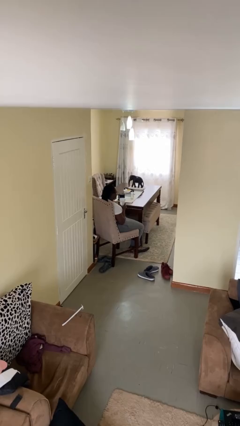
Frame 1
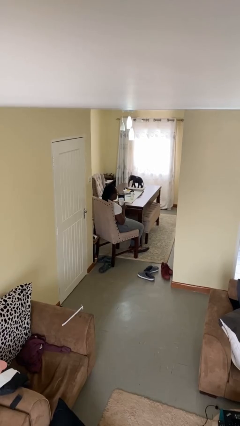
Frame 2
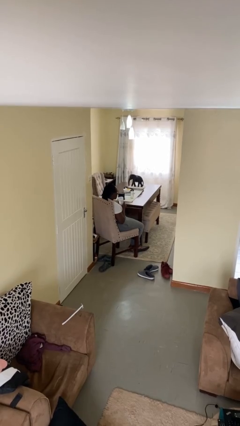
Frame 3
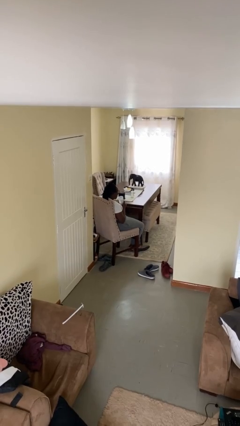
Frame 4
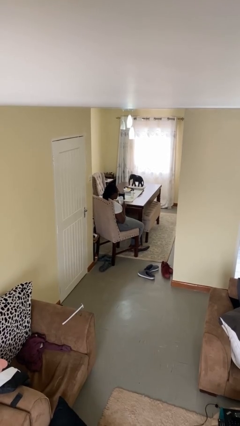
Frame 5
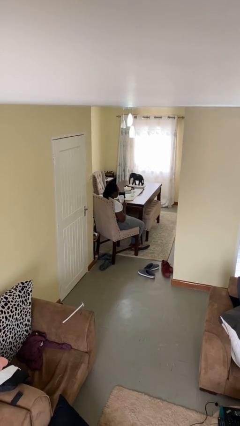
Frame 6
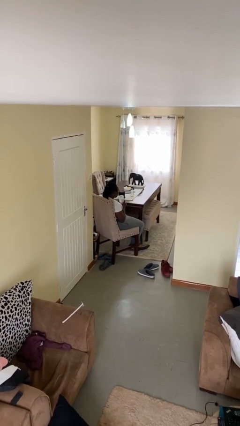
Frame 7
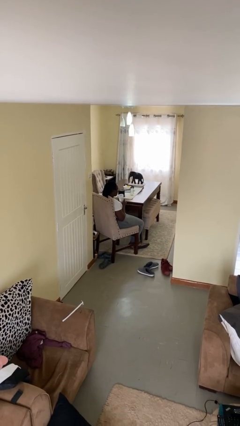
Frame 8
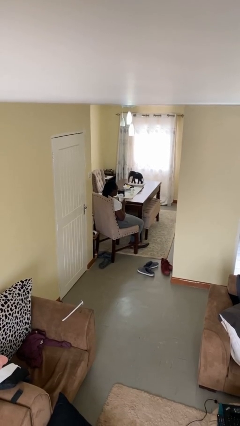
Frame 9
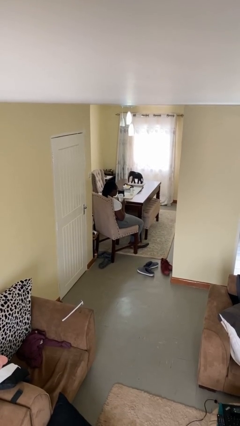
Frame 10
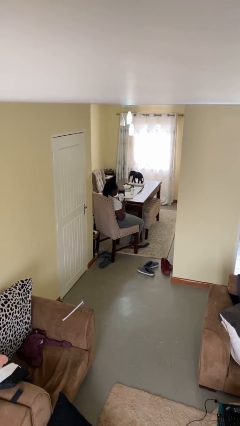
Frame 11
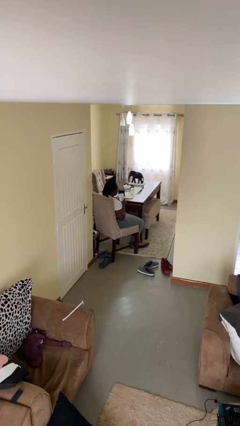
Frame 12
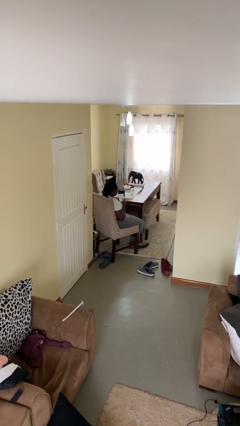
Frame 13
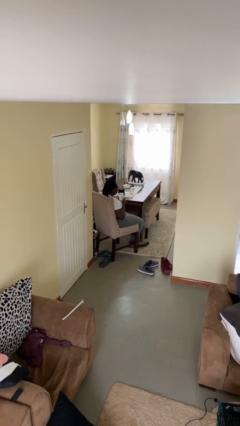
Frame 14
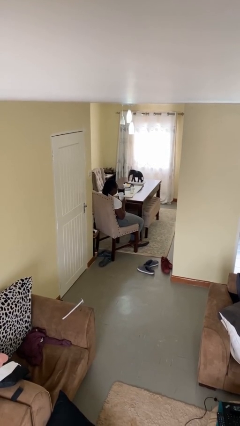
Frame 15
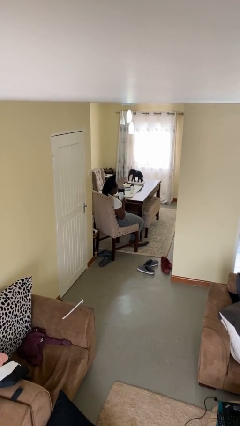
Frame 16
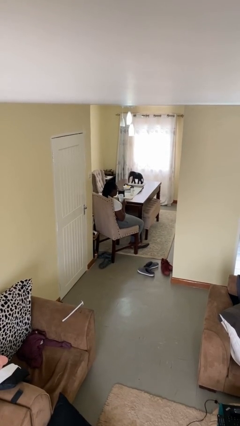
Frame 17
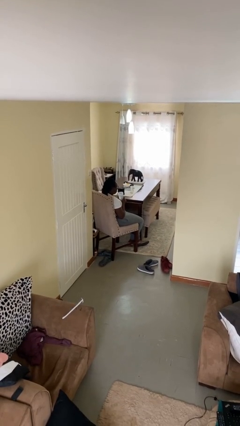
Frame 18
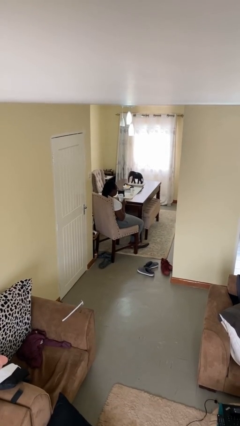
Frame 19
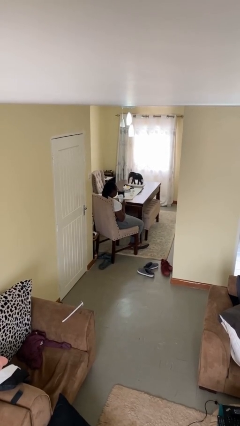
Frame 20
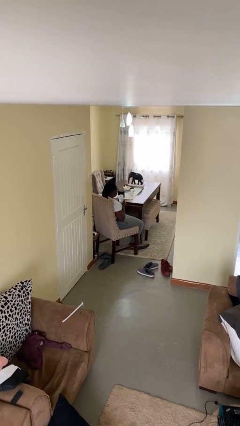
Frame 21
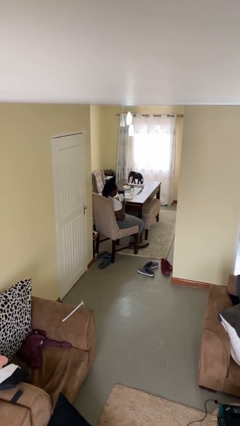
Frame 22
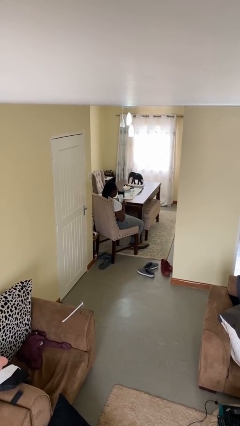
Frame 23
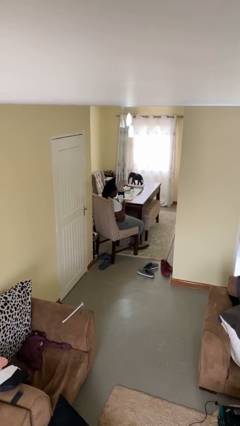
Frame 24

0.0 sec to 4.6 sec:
person drinks from straw

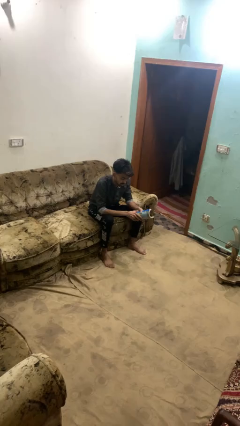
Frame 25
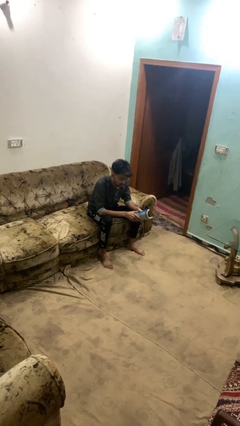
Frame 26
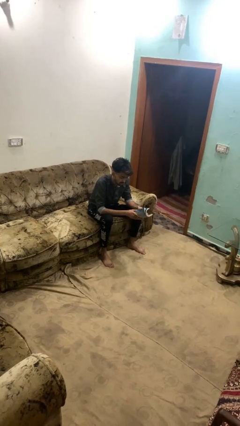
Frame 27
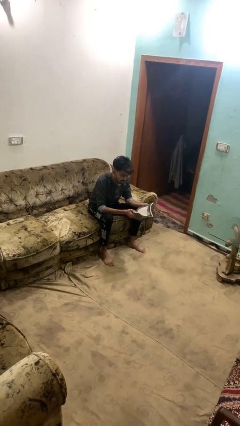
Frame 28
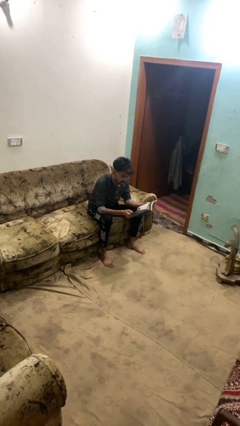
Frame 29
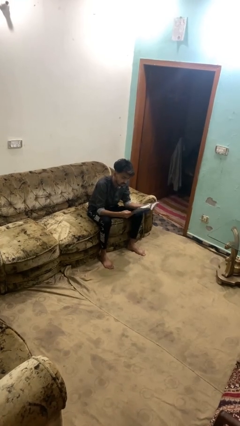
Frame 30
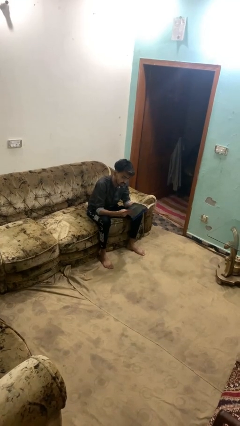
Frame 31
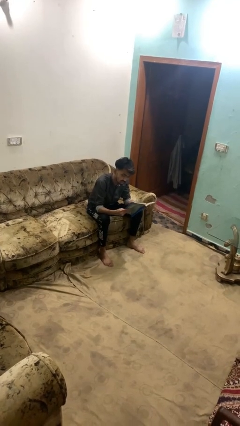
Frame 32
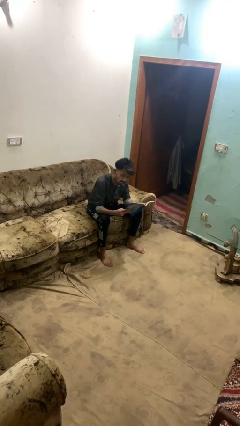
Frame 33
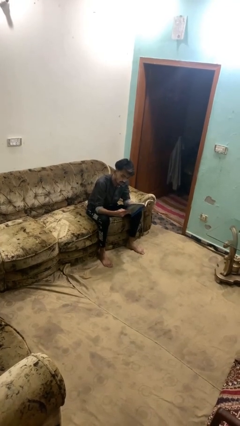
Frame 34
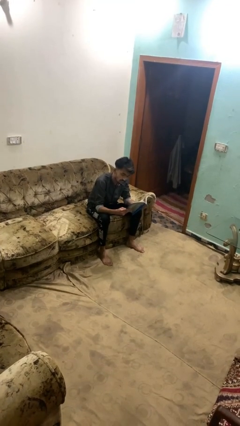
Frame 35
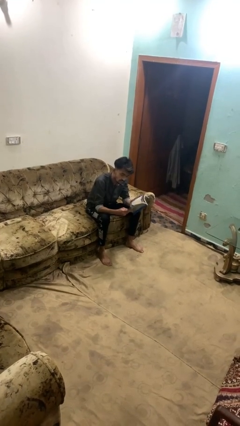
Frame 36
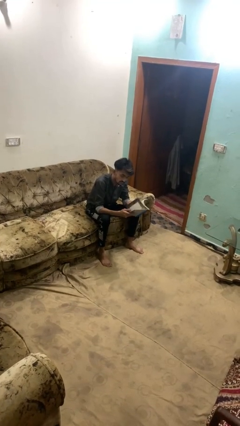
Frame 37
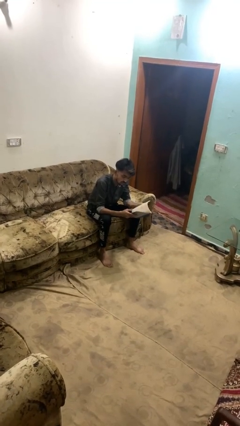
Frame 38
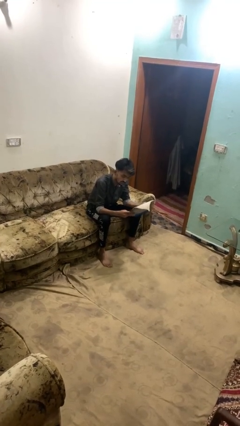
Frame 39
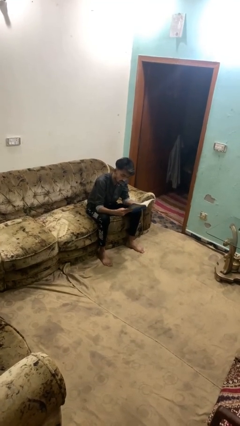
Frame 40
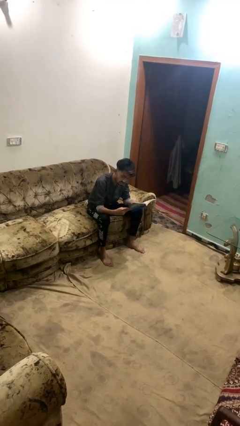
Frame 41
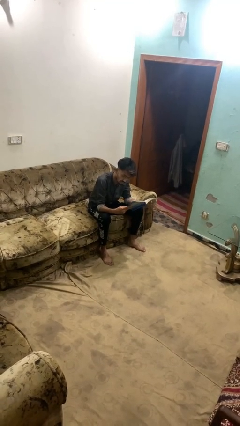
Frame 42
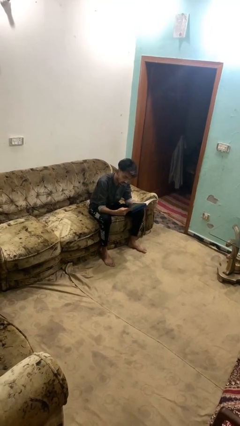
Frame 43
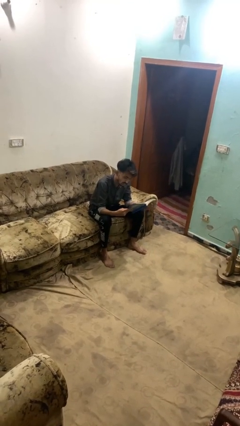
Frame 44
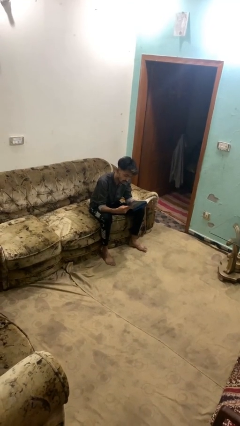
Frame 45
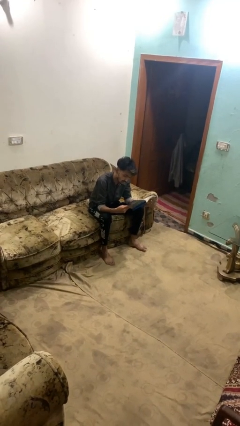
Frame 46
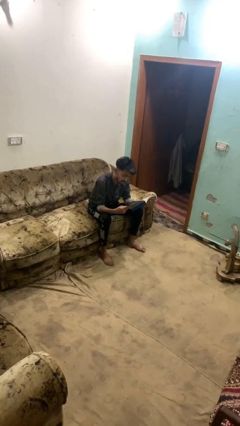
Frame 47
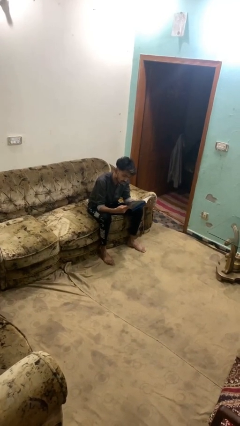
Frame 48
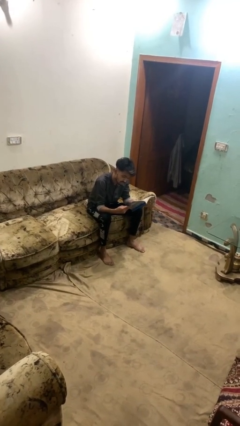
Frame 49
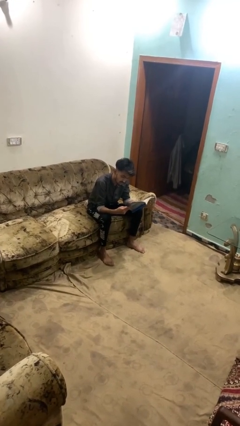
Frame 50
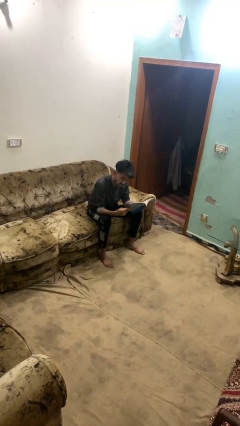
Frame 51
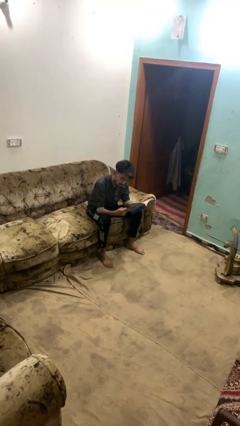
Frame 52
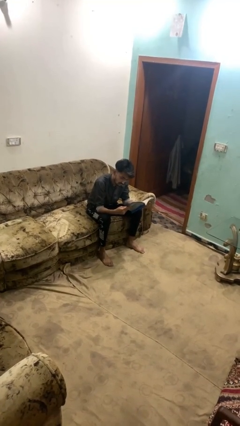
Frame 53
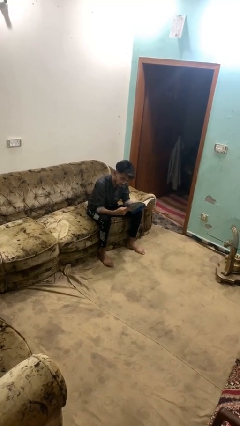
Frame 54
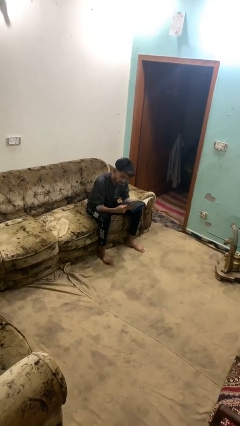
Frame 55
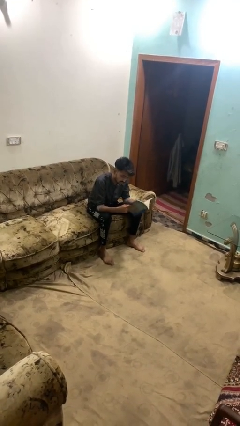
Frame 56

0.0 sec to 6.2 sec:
person reads book

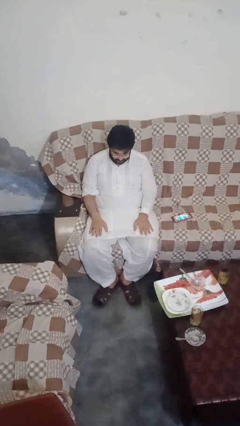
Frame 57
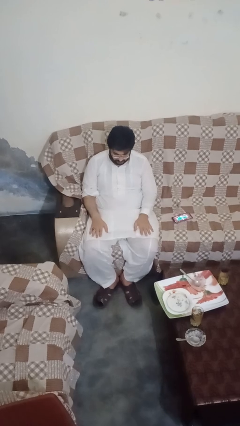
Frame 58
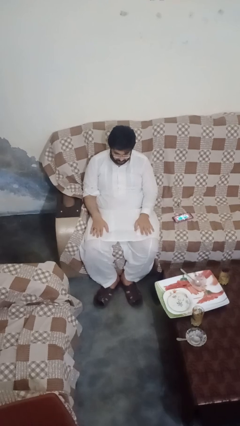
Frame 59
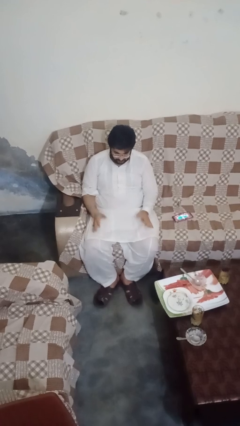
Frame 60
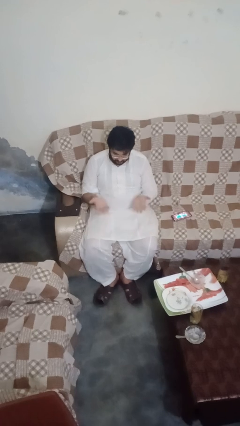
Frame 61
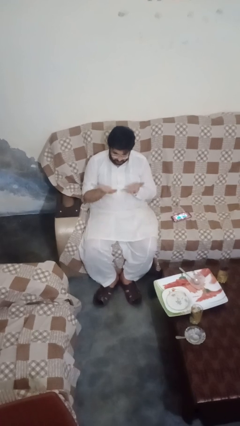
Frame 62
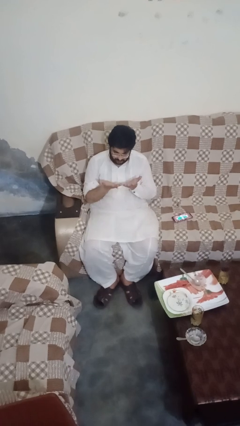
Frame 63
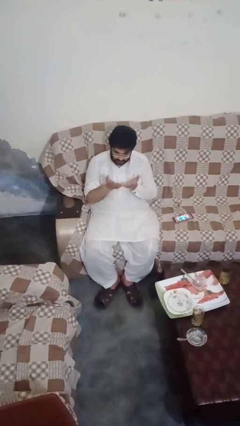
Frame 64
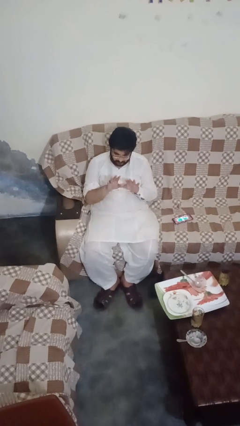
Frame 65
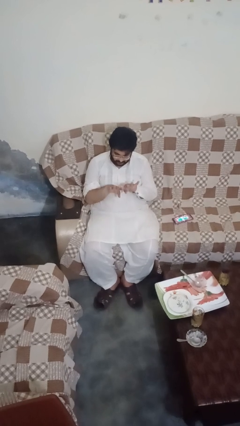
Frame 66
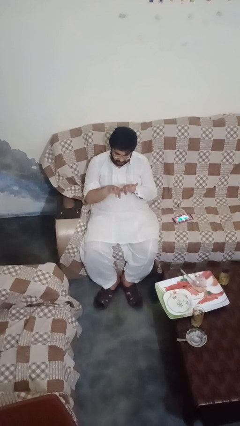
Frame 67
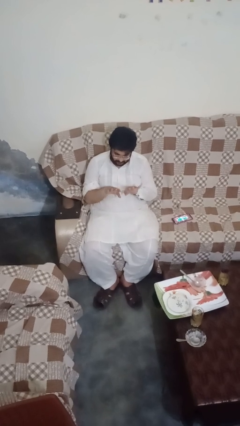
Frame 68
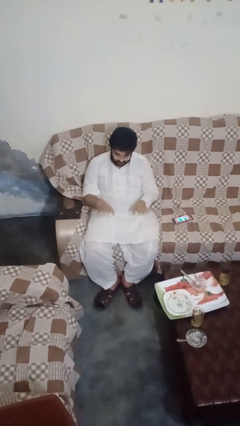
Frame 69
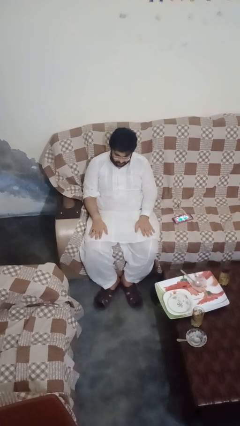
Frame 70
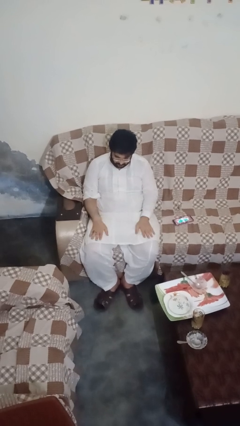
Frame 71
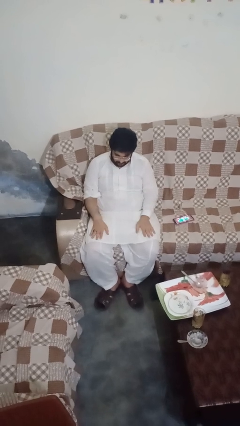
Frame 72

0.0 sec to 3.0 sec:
person looks at hands in lap

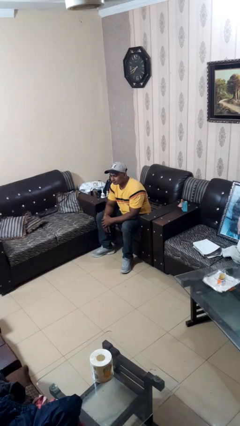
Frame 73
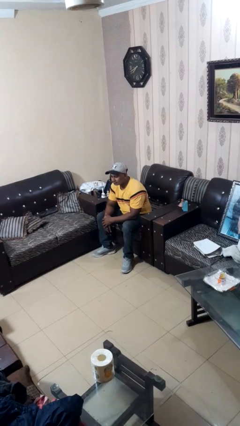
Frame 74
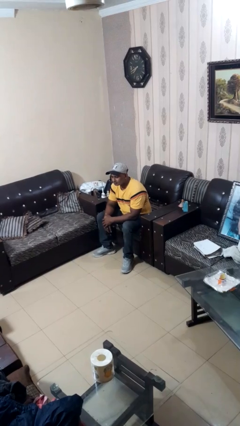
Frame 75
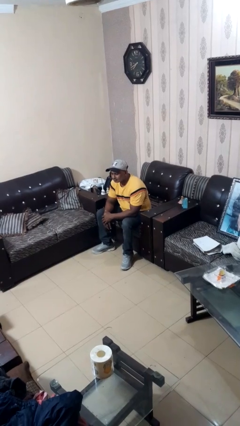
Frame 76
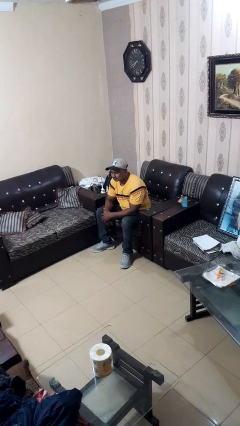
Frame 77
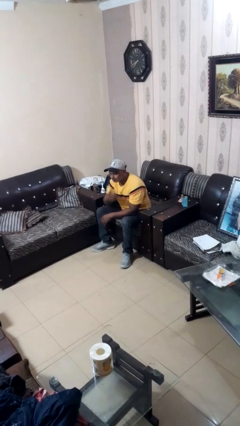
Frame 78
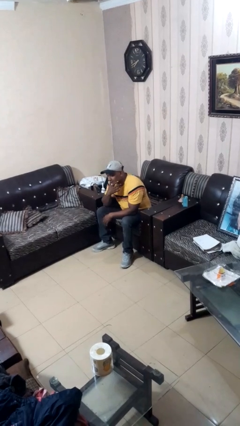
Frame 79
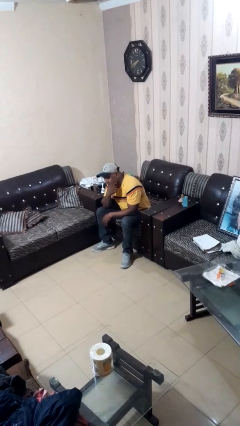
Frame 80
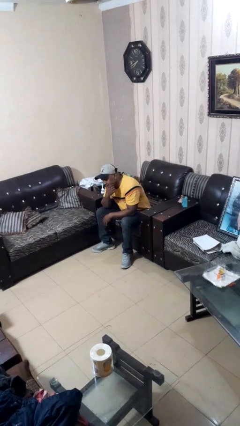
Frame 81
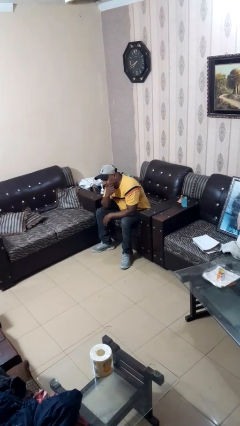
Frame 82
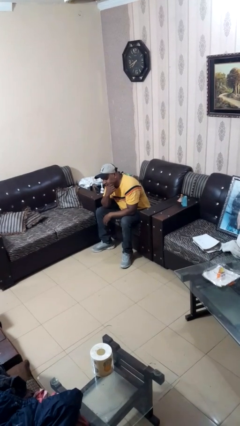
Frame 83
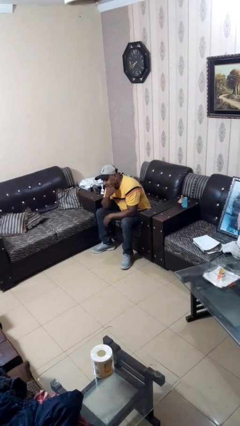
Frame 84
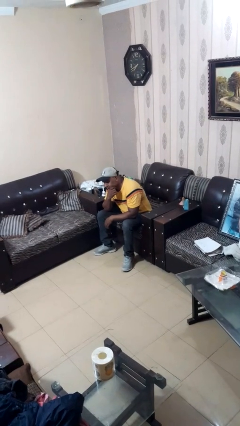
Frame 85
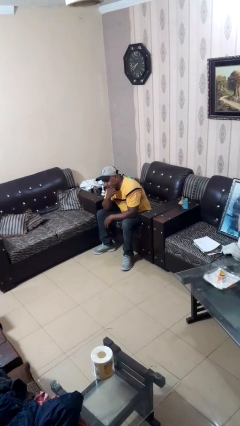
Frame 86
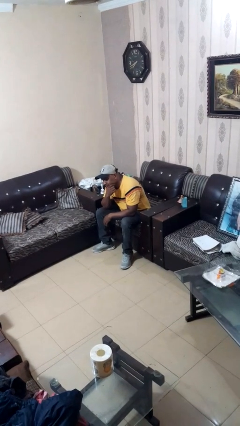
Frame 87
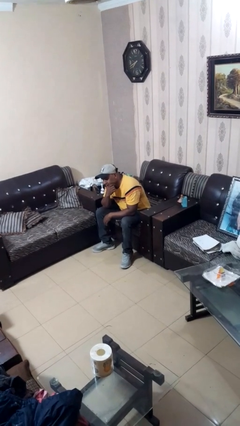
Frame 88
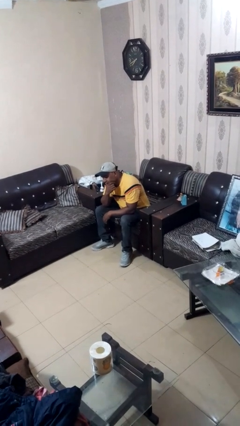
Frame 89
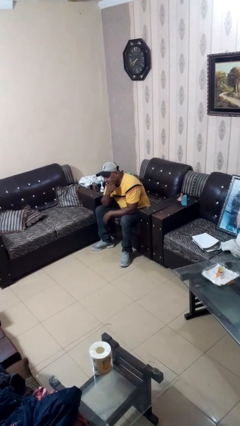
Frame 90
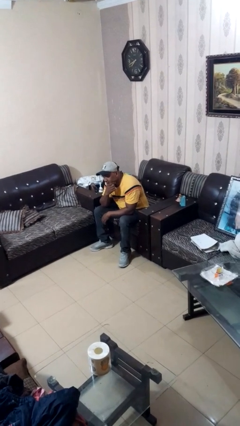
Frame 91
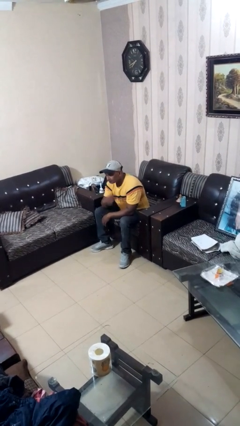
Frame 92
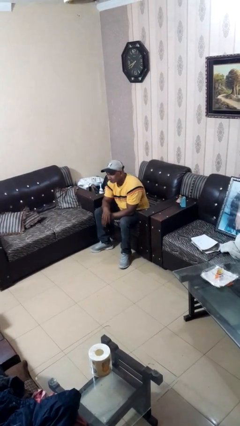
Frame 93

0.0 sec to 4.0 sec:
person strokes chin
